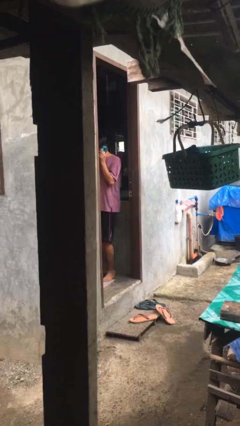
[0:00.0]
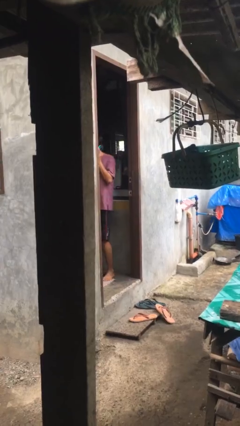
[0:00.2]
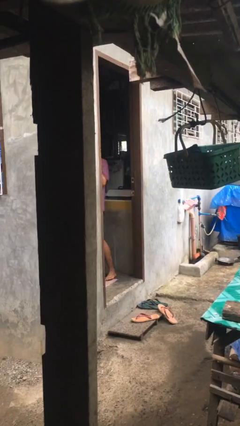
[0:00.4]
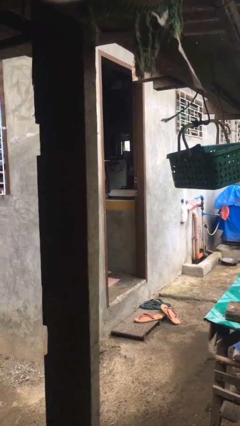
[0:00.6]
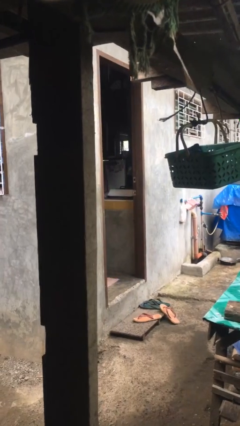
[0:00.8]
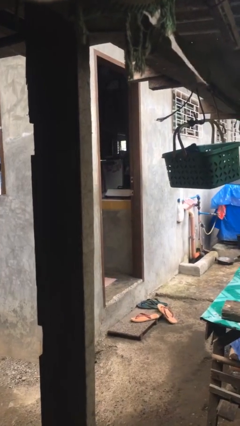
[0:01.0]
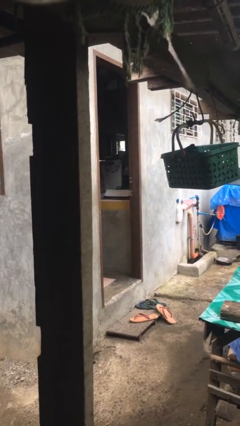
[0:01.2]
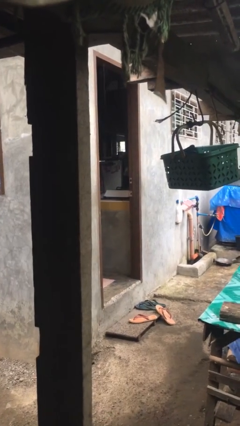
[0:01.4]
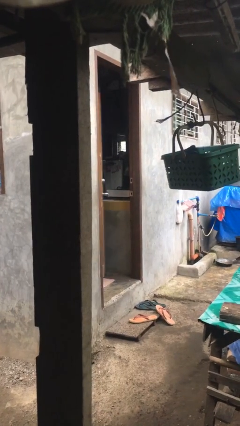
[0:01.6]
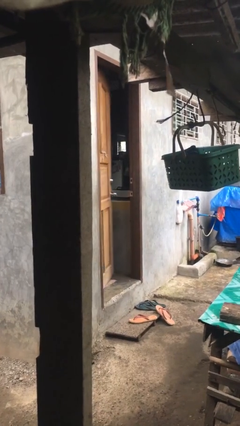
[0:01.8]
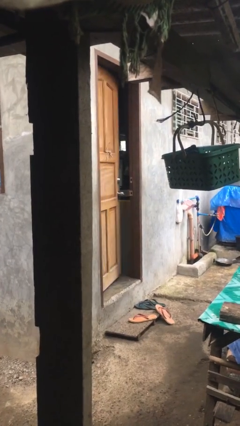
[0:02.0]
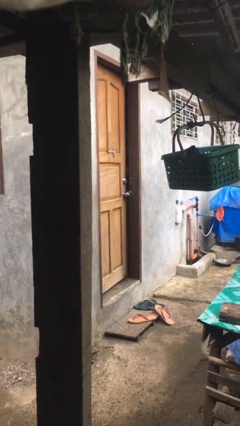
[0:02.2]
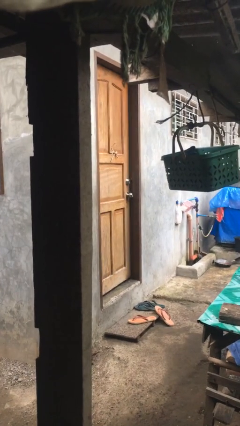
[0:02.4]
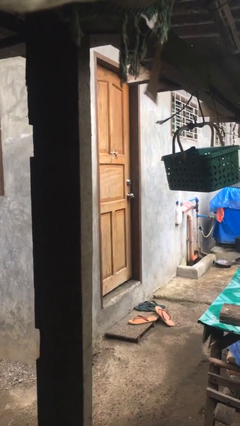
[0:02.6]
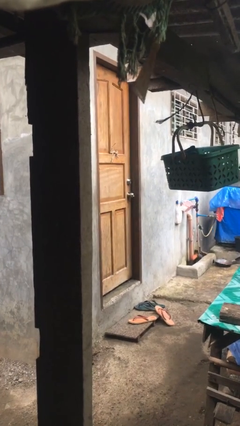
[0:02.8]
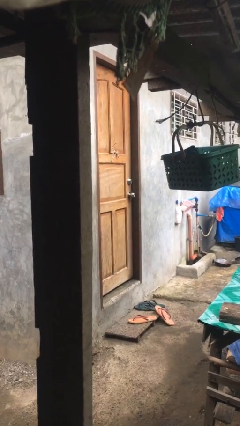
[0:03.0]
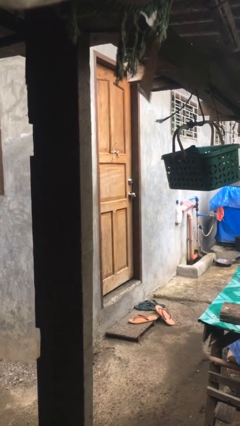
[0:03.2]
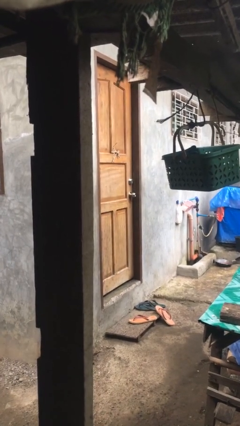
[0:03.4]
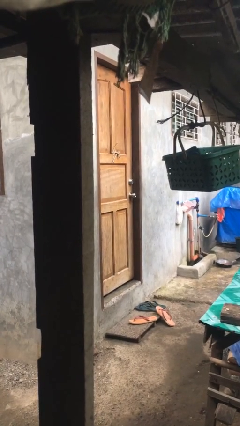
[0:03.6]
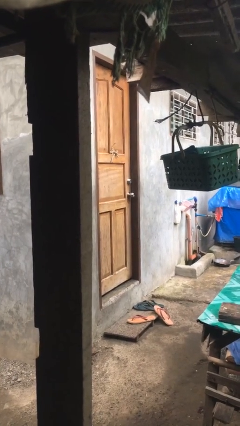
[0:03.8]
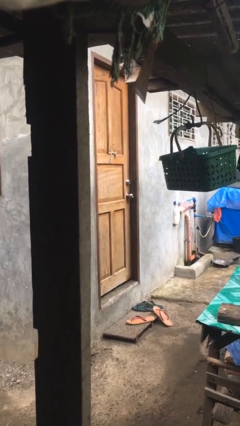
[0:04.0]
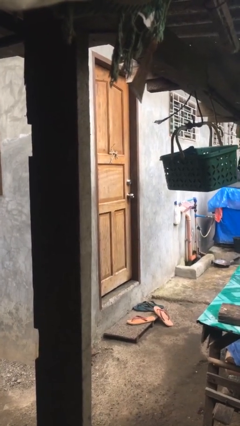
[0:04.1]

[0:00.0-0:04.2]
person closes facility door

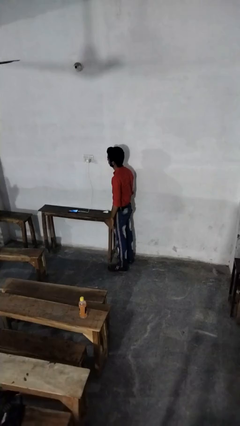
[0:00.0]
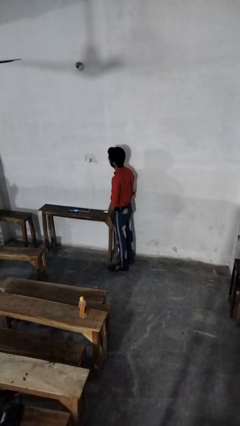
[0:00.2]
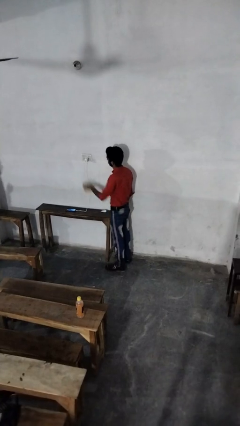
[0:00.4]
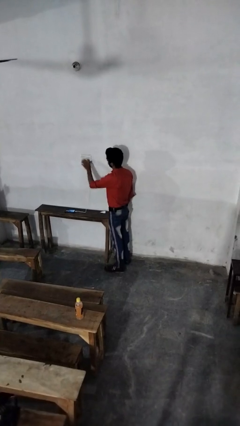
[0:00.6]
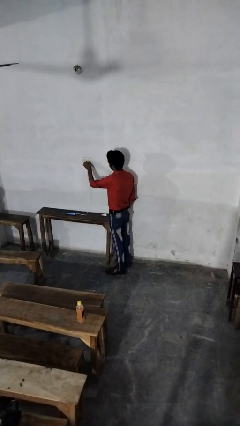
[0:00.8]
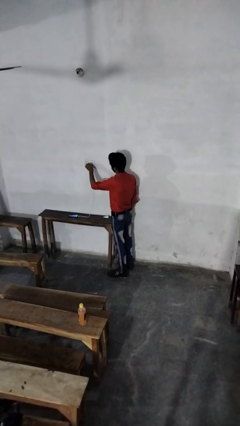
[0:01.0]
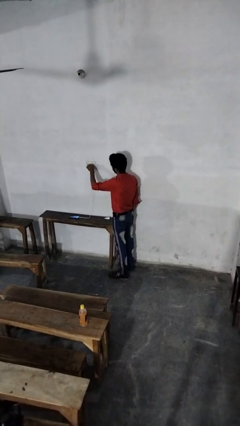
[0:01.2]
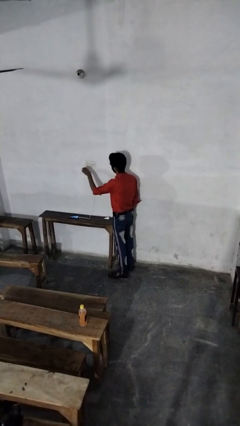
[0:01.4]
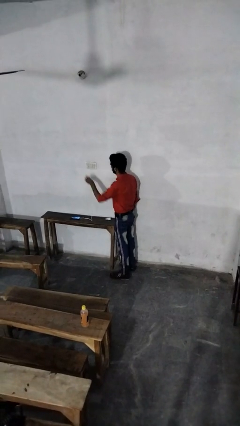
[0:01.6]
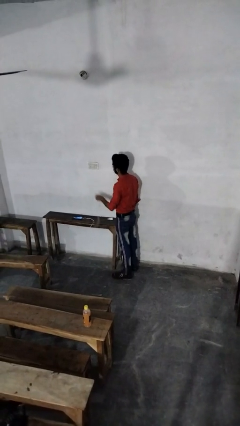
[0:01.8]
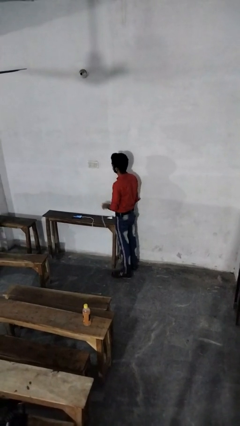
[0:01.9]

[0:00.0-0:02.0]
person unplugs from electrical socket

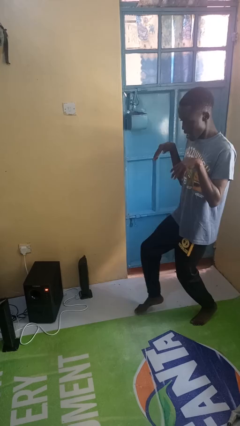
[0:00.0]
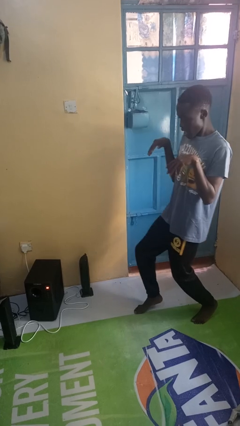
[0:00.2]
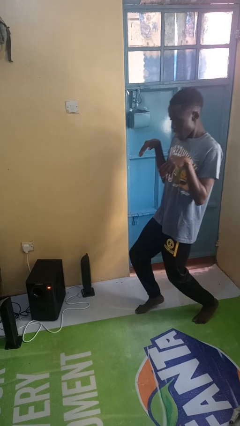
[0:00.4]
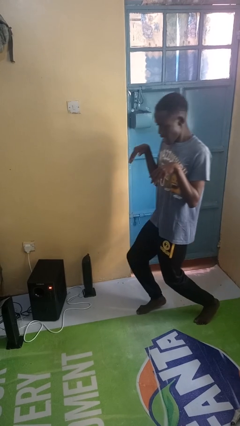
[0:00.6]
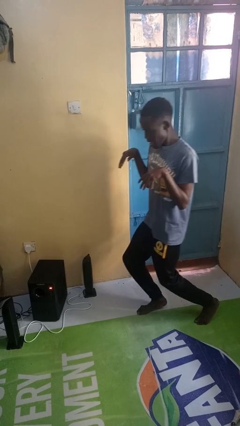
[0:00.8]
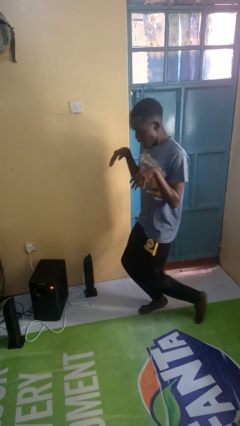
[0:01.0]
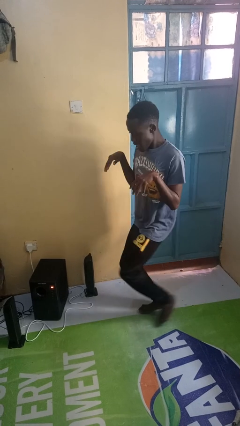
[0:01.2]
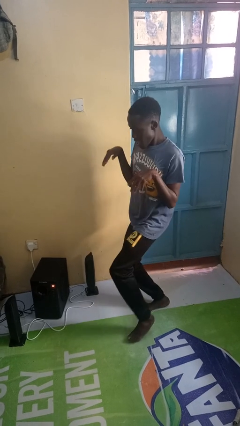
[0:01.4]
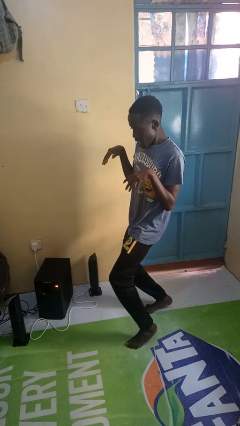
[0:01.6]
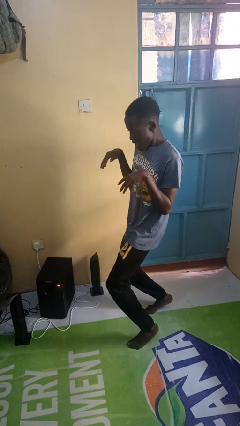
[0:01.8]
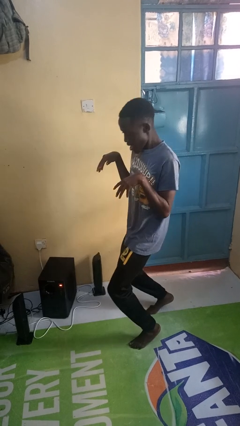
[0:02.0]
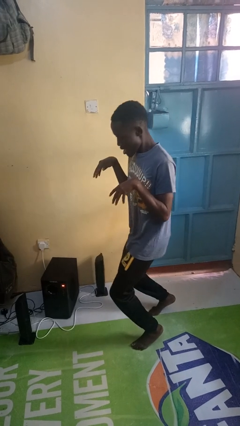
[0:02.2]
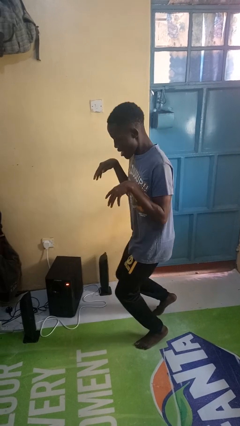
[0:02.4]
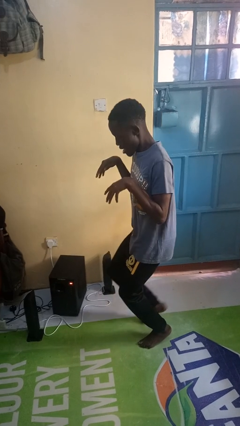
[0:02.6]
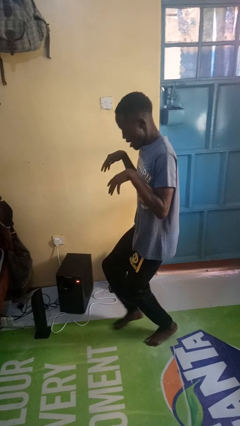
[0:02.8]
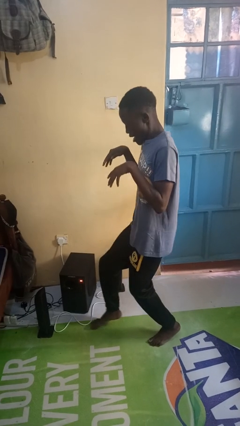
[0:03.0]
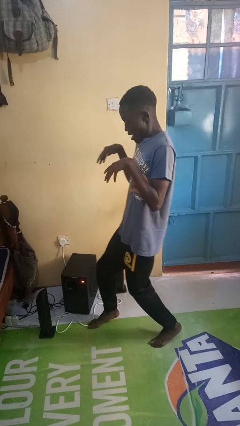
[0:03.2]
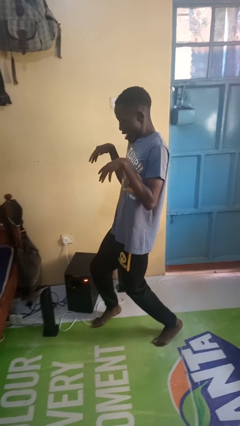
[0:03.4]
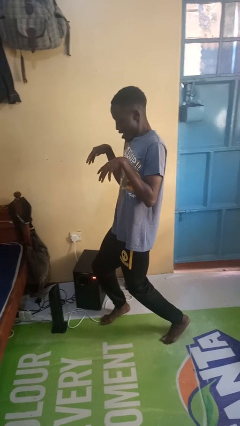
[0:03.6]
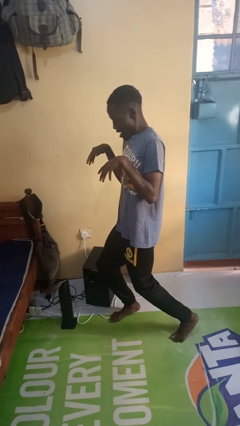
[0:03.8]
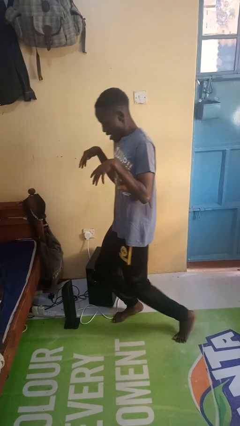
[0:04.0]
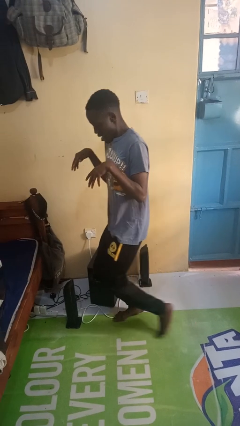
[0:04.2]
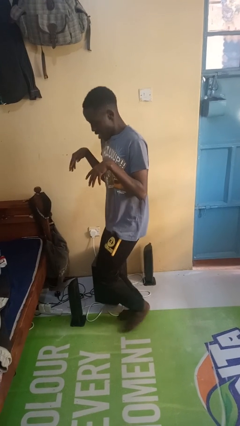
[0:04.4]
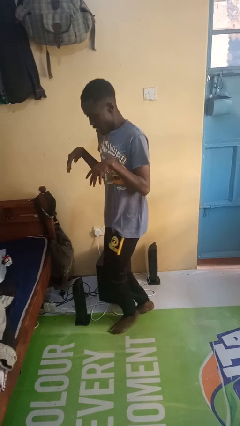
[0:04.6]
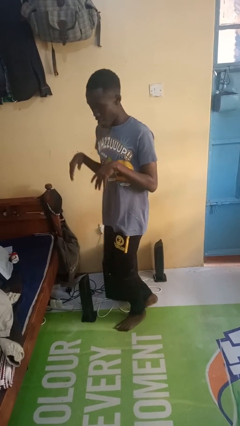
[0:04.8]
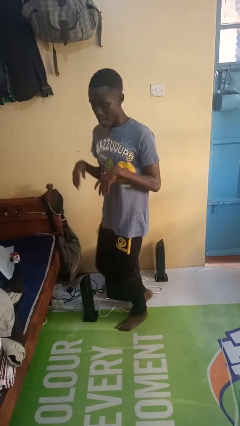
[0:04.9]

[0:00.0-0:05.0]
person walks tiptoe

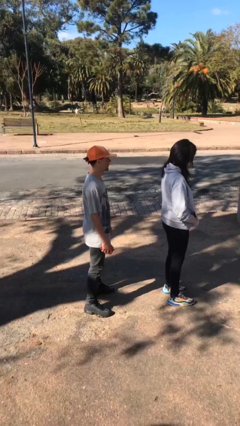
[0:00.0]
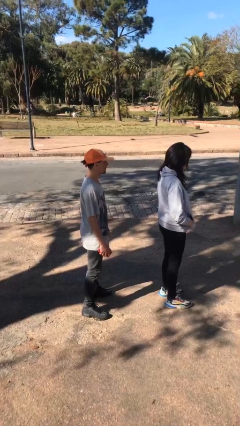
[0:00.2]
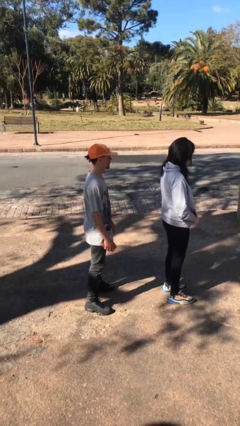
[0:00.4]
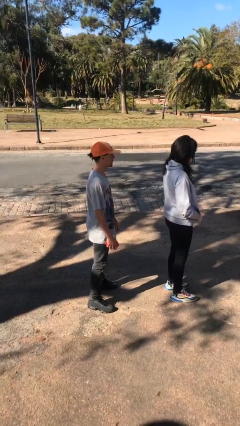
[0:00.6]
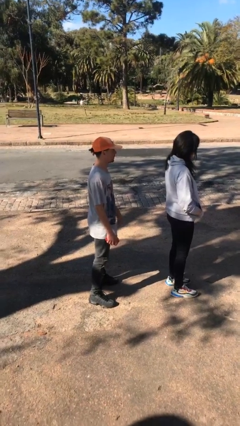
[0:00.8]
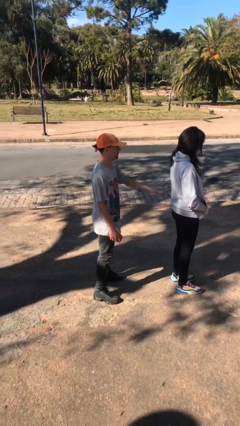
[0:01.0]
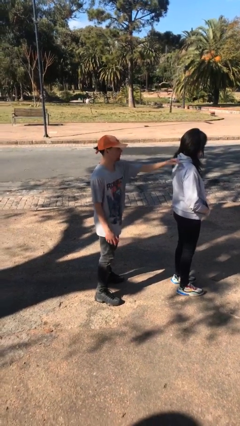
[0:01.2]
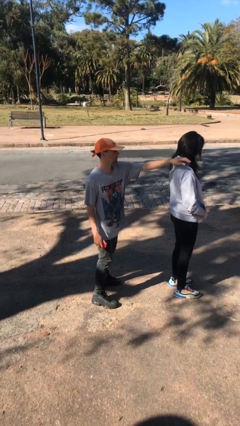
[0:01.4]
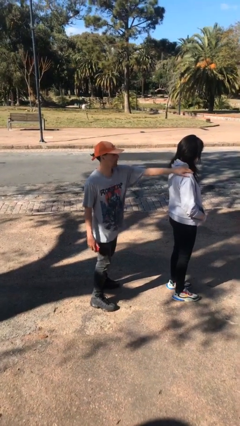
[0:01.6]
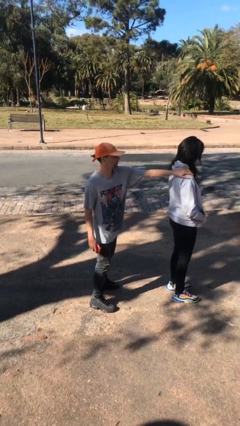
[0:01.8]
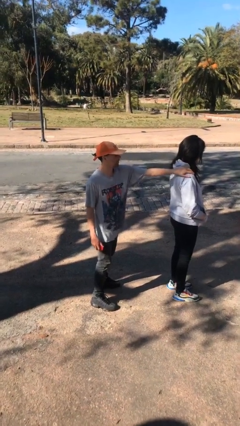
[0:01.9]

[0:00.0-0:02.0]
person grabs person by shoulder

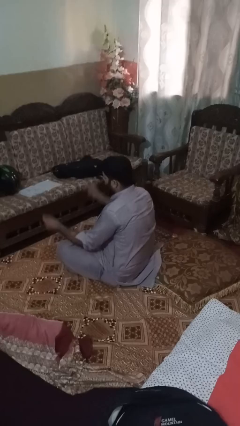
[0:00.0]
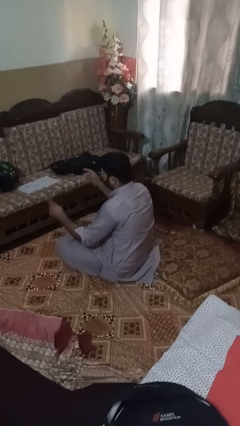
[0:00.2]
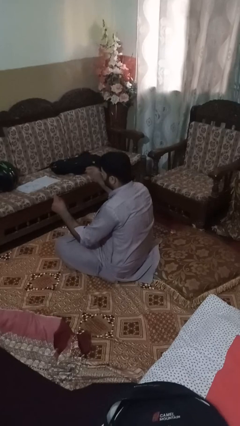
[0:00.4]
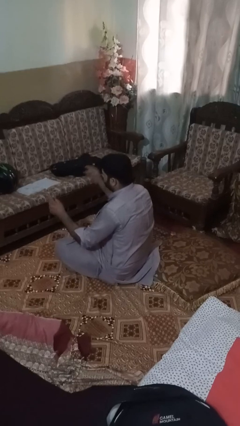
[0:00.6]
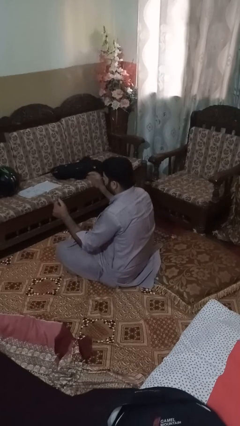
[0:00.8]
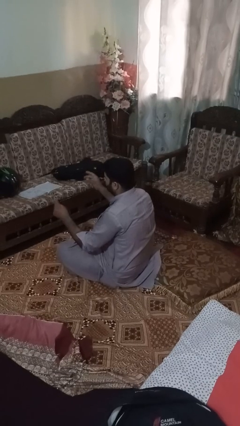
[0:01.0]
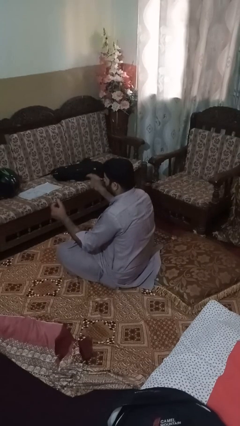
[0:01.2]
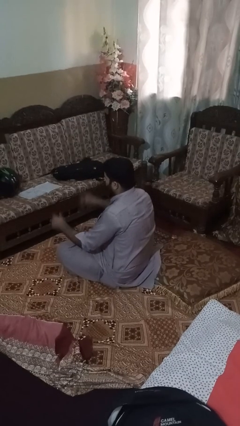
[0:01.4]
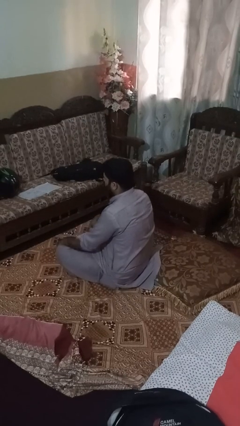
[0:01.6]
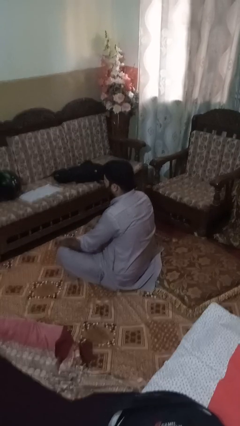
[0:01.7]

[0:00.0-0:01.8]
person snaps fingers

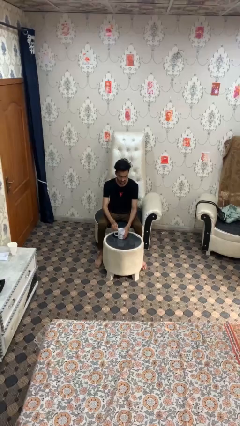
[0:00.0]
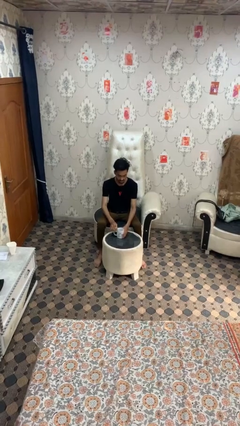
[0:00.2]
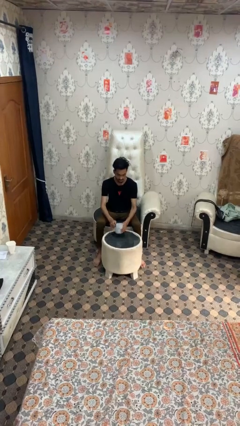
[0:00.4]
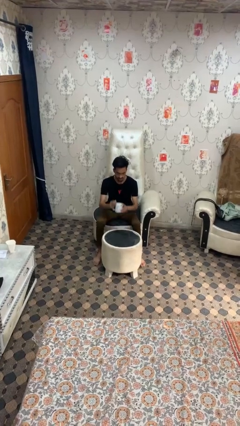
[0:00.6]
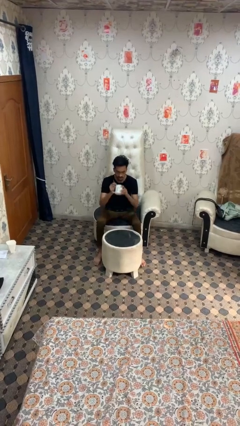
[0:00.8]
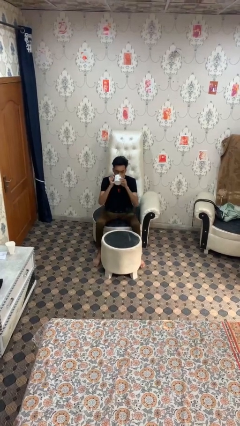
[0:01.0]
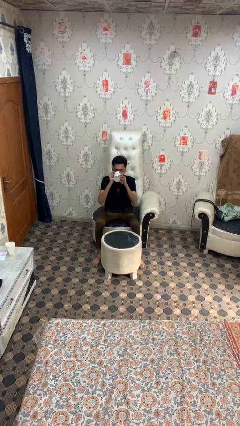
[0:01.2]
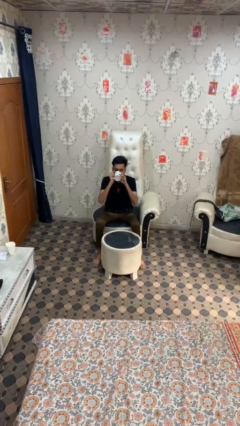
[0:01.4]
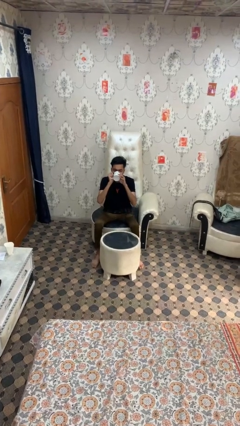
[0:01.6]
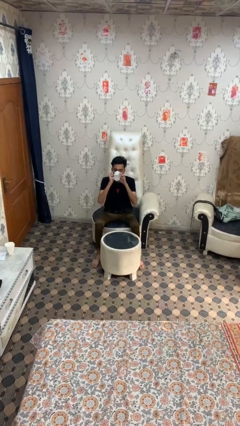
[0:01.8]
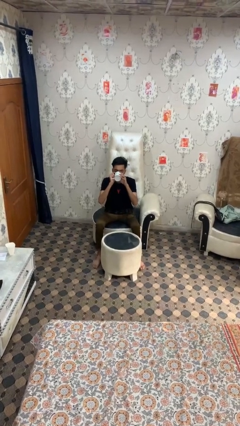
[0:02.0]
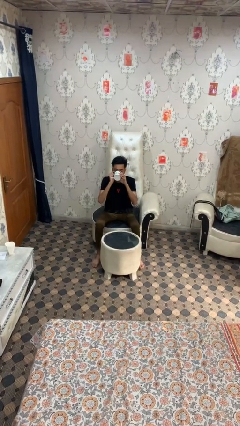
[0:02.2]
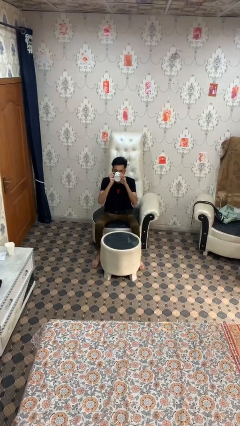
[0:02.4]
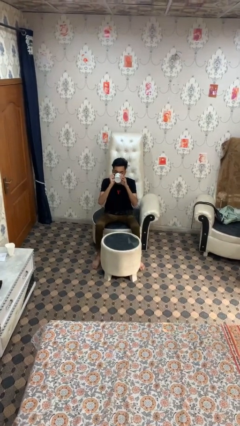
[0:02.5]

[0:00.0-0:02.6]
person drinks from mug
